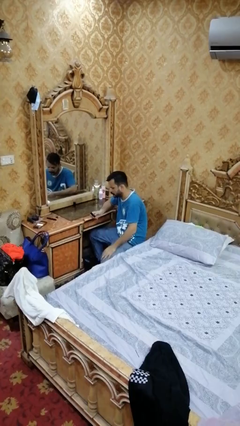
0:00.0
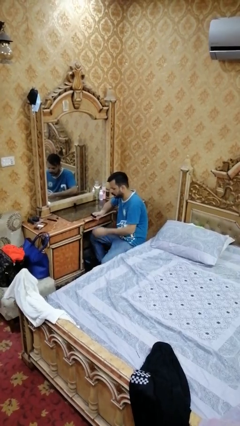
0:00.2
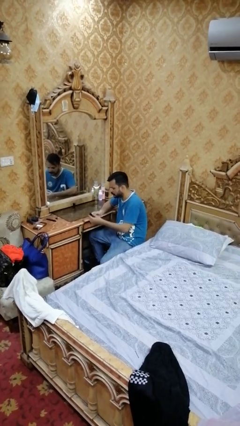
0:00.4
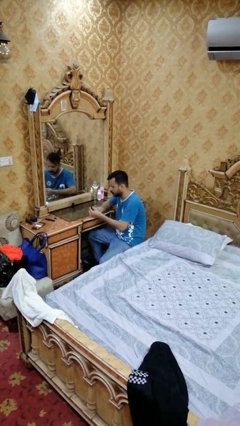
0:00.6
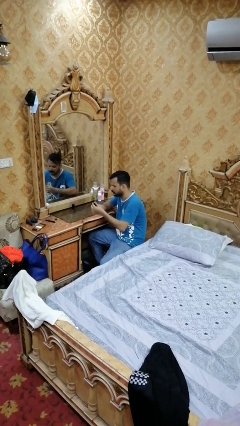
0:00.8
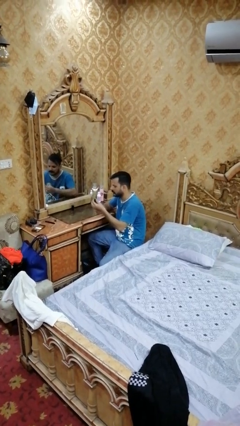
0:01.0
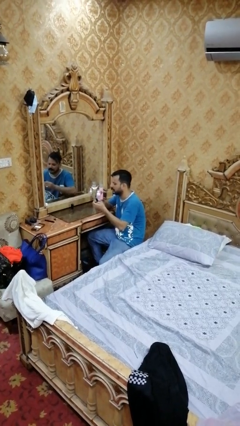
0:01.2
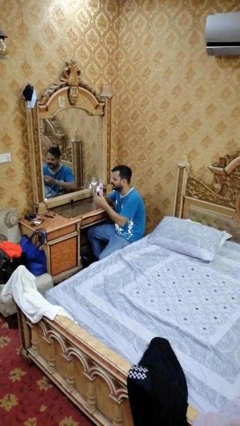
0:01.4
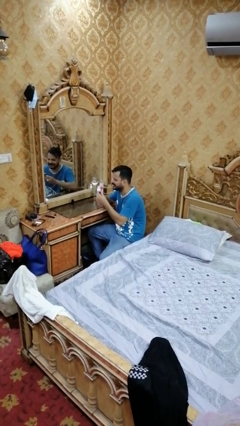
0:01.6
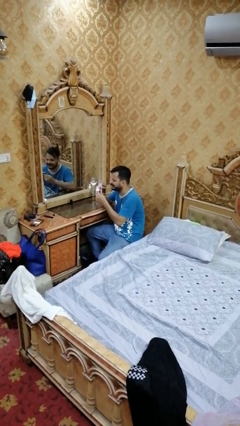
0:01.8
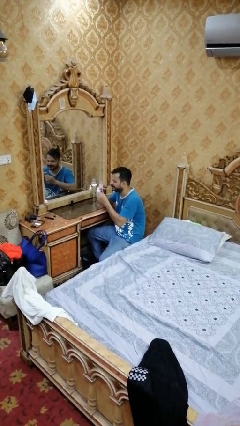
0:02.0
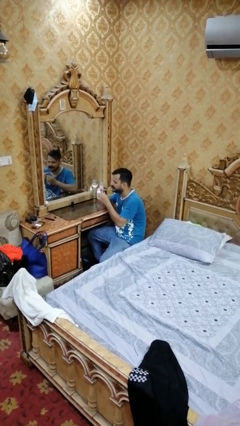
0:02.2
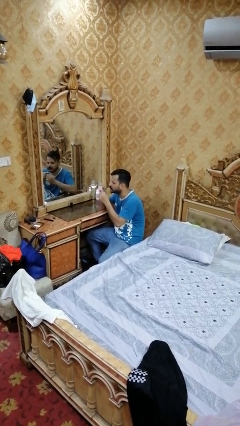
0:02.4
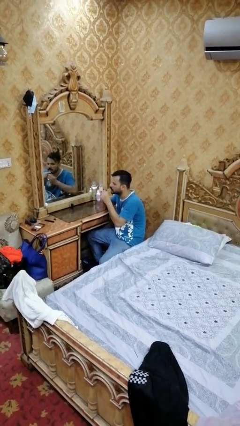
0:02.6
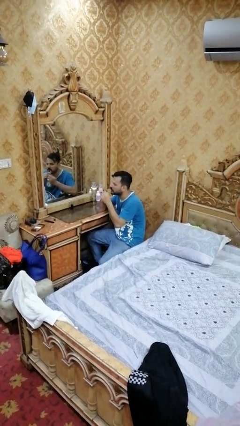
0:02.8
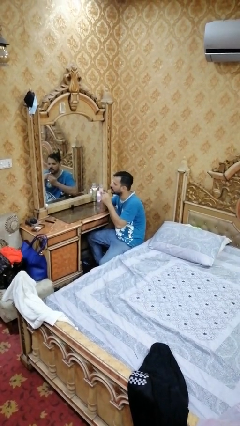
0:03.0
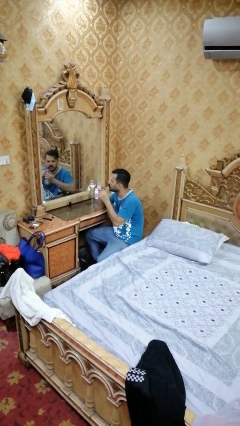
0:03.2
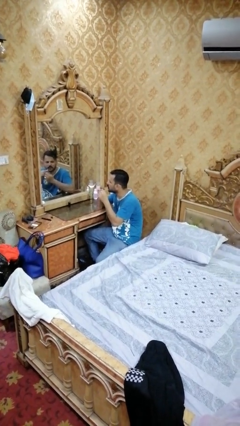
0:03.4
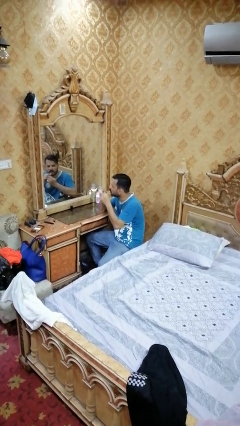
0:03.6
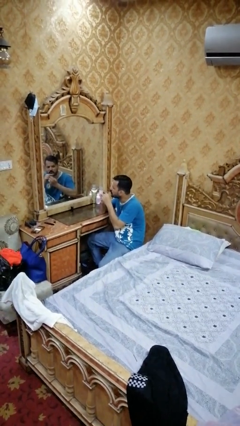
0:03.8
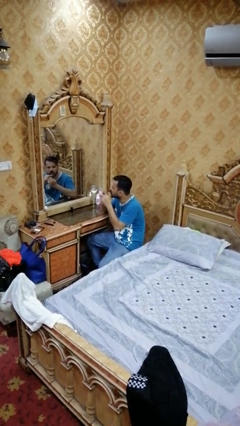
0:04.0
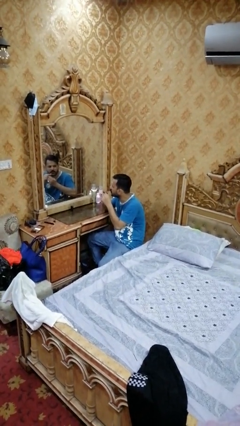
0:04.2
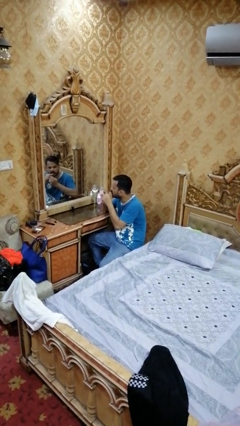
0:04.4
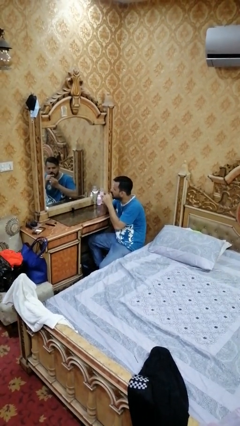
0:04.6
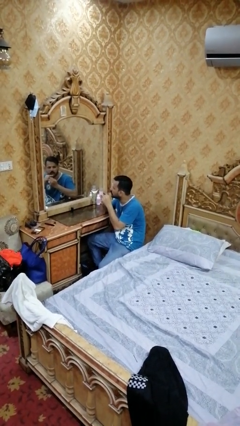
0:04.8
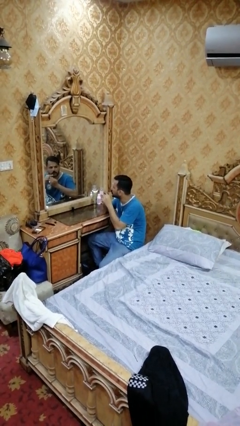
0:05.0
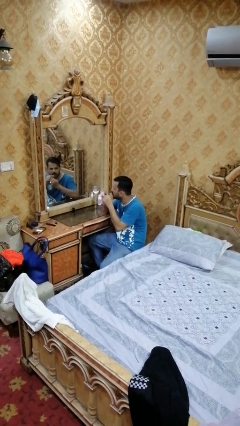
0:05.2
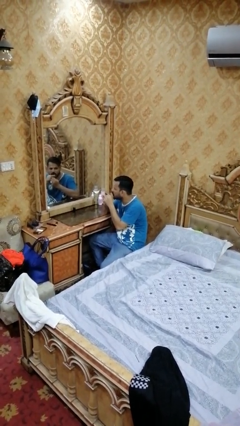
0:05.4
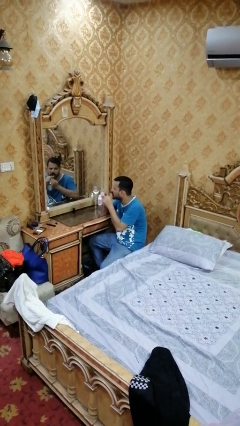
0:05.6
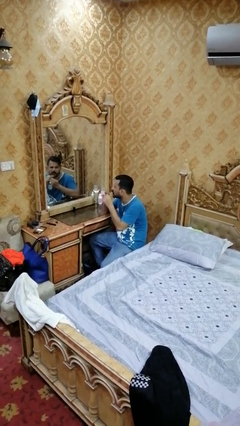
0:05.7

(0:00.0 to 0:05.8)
person applies lip makeup

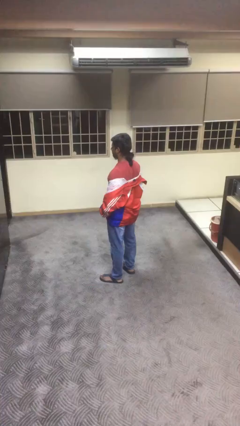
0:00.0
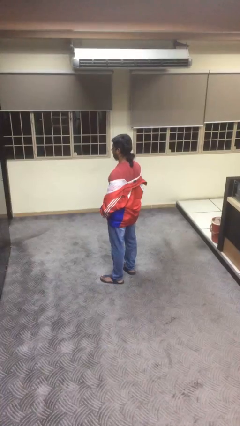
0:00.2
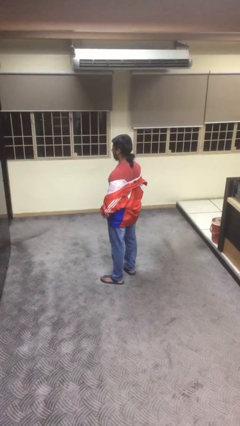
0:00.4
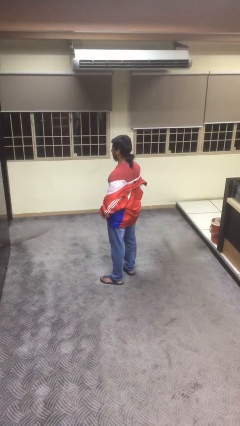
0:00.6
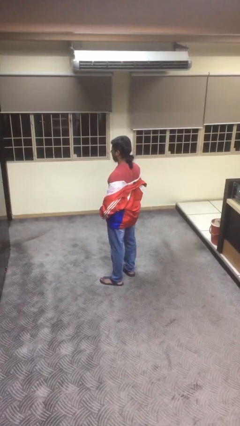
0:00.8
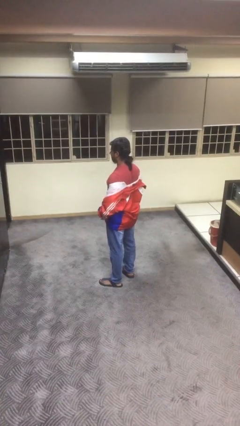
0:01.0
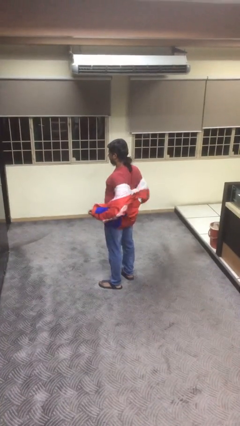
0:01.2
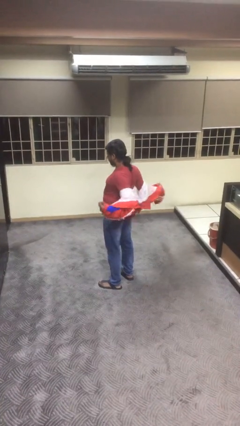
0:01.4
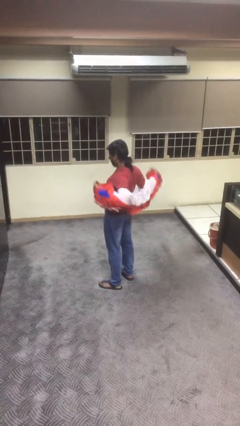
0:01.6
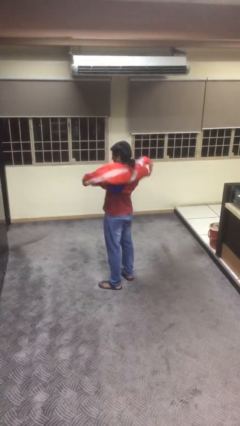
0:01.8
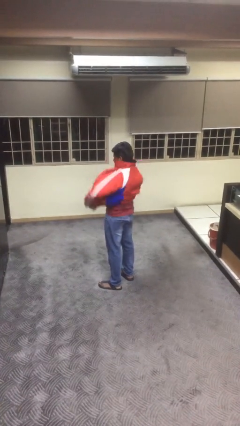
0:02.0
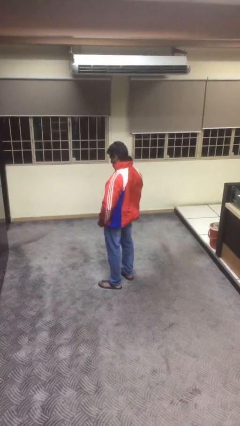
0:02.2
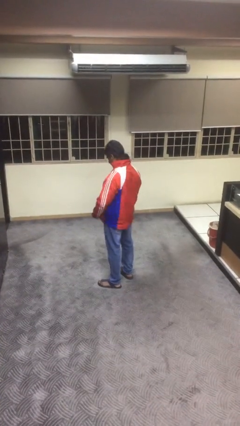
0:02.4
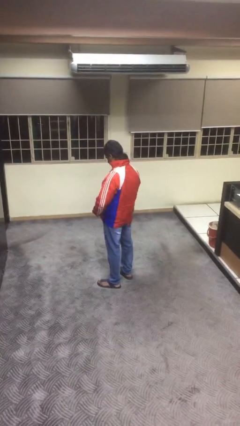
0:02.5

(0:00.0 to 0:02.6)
person puts on jacket

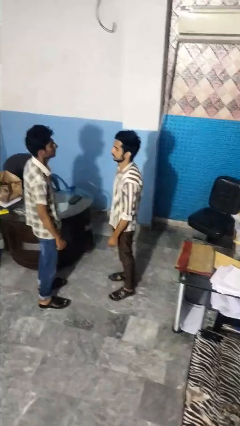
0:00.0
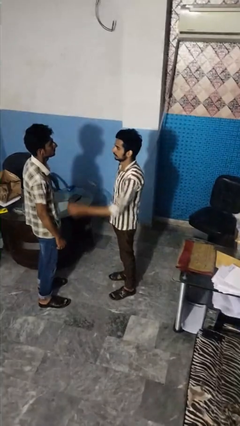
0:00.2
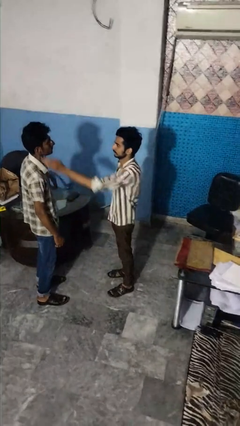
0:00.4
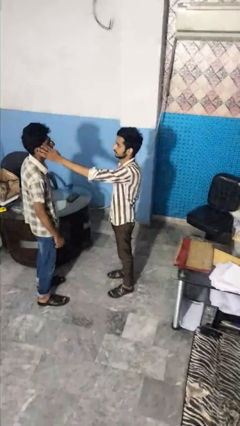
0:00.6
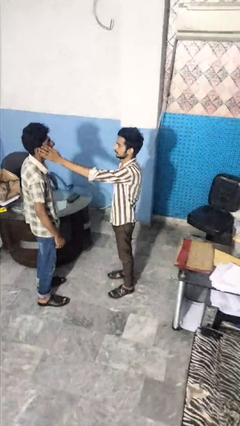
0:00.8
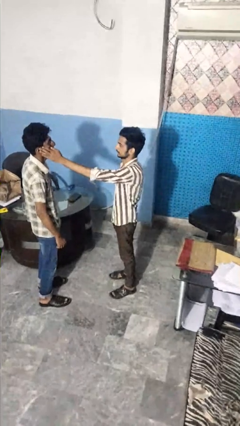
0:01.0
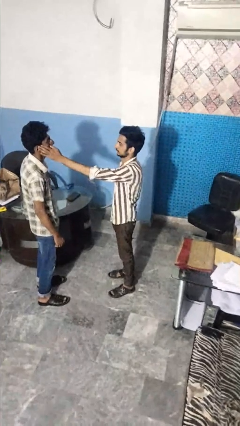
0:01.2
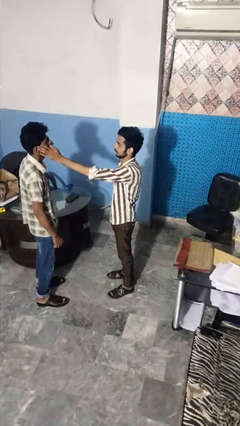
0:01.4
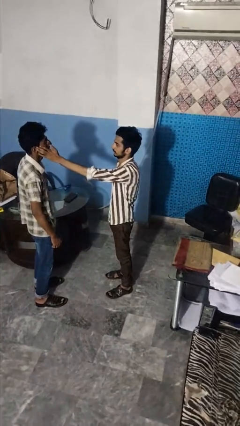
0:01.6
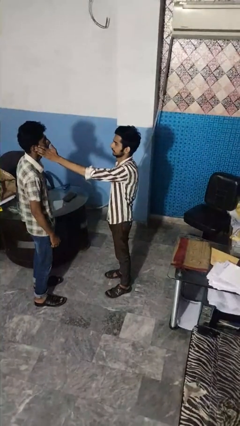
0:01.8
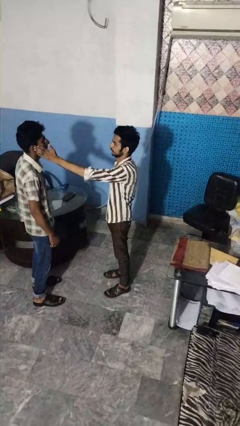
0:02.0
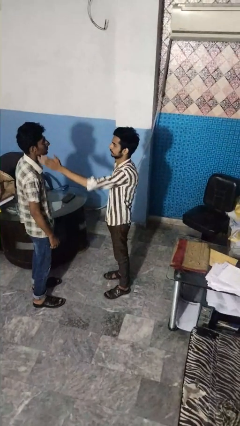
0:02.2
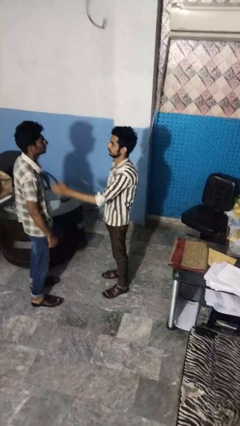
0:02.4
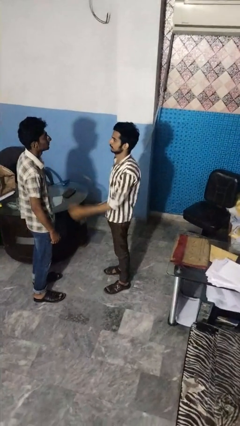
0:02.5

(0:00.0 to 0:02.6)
person touches face of person

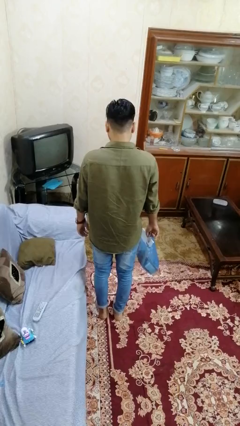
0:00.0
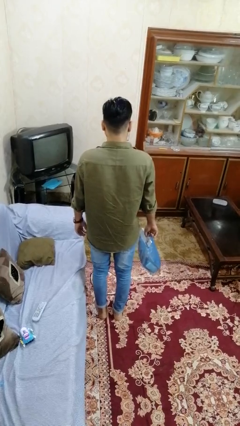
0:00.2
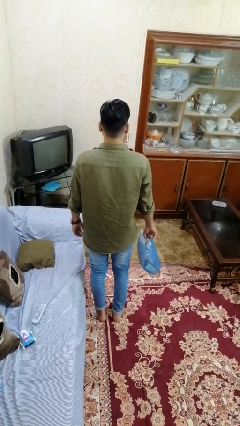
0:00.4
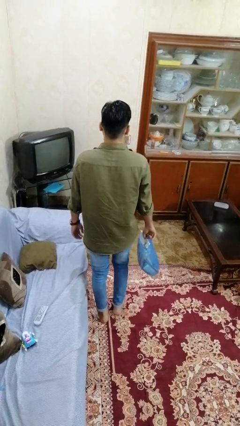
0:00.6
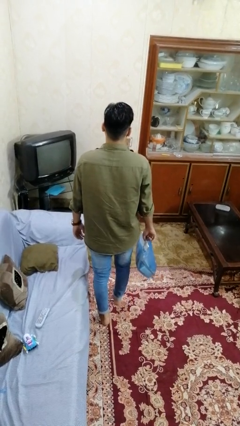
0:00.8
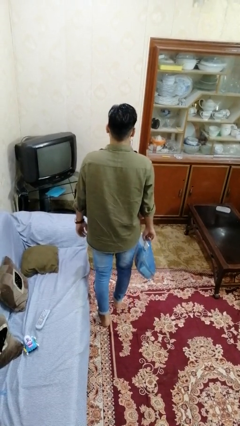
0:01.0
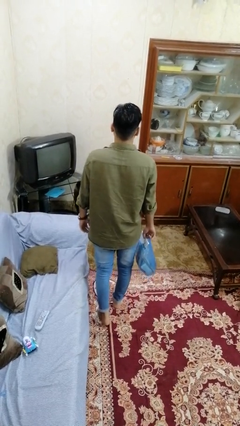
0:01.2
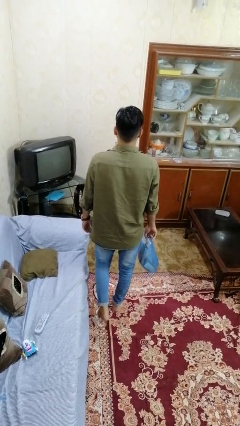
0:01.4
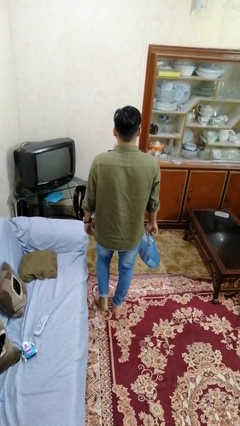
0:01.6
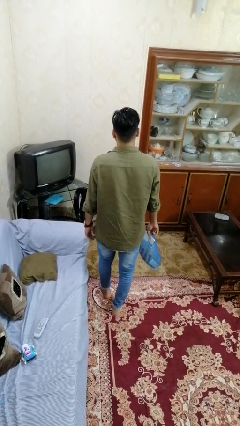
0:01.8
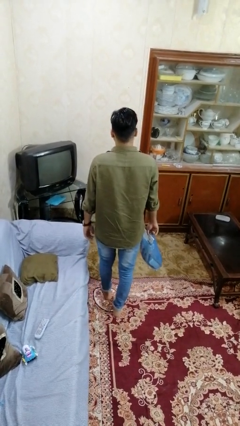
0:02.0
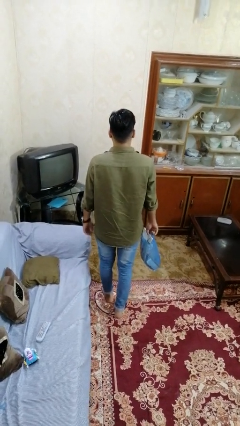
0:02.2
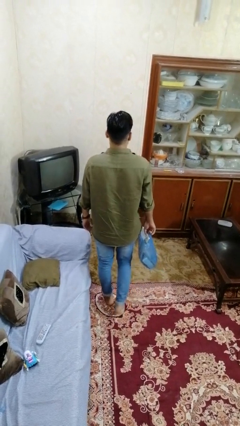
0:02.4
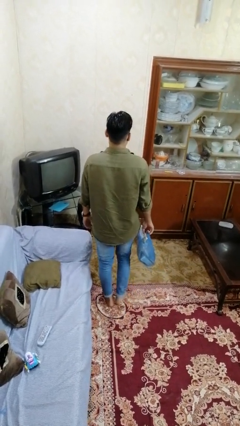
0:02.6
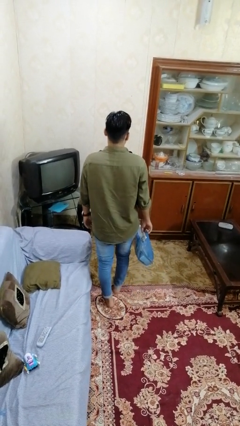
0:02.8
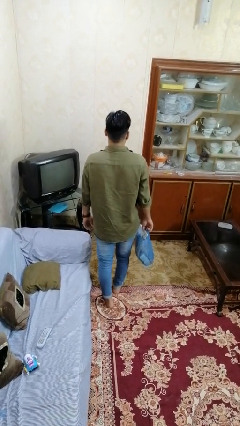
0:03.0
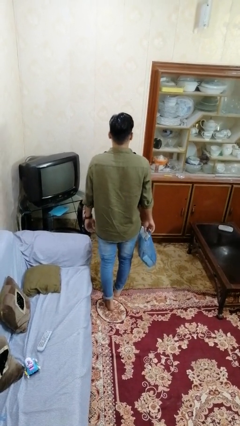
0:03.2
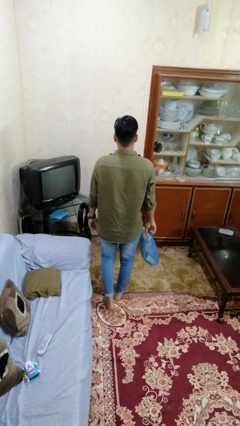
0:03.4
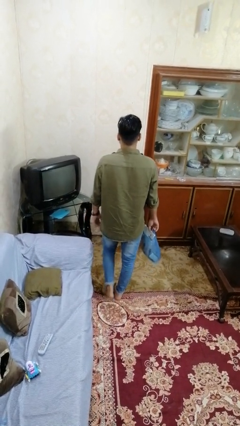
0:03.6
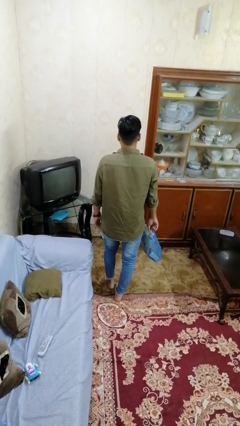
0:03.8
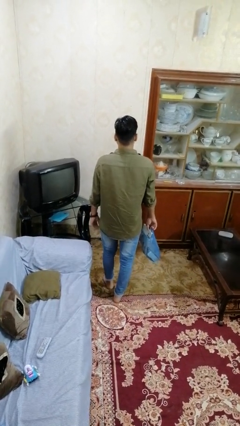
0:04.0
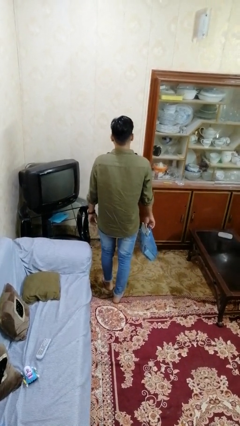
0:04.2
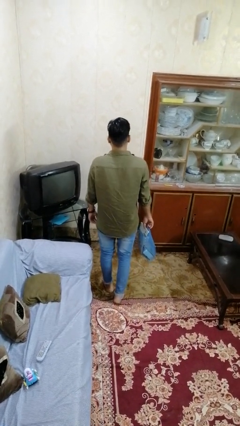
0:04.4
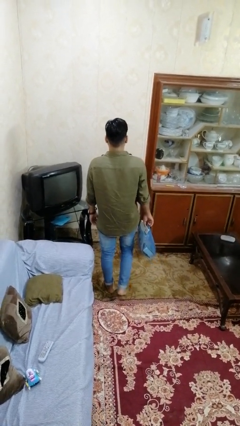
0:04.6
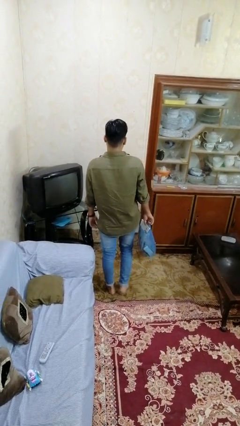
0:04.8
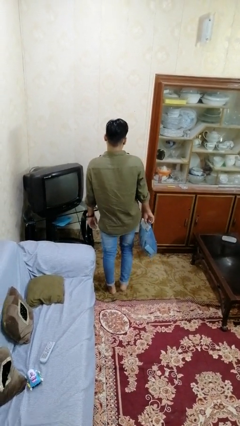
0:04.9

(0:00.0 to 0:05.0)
person carries groceries

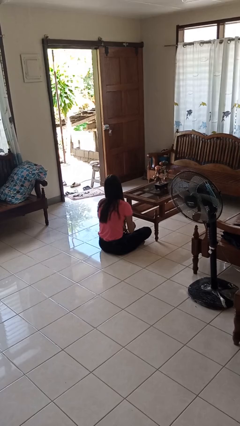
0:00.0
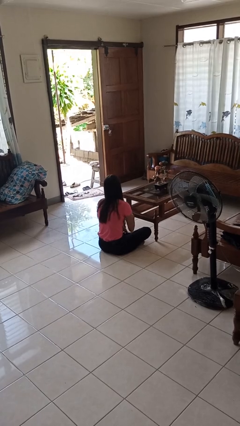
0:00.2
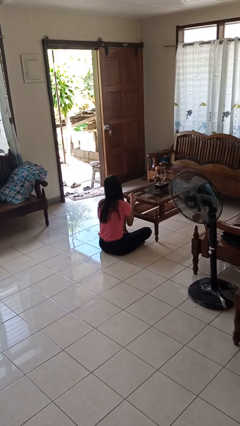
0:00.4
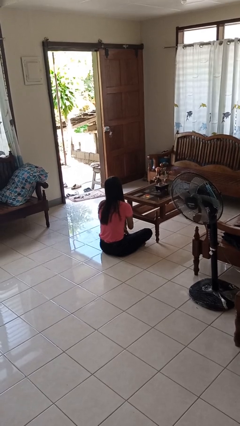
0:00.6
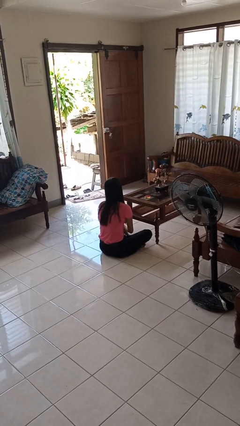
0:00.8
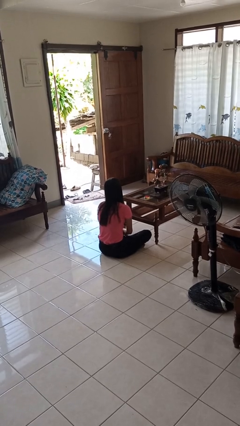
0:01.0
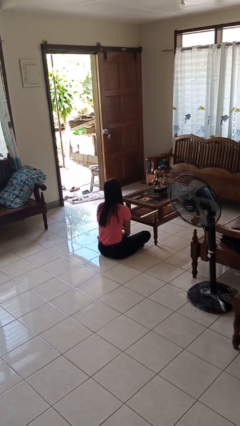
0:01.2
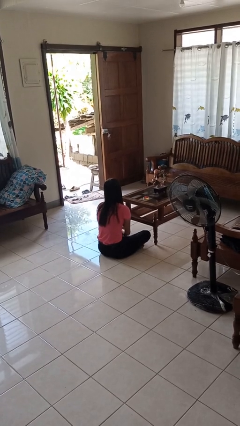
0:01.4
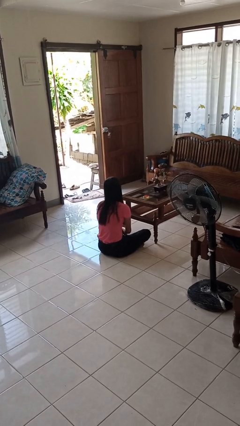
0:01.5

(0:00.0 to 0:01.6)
person throws object on table

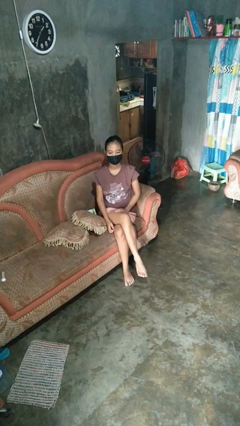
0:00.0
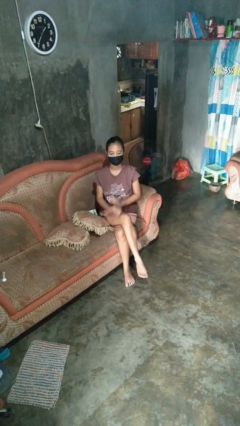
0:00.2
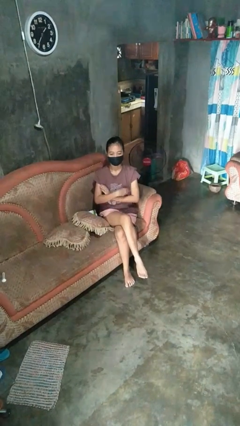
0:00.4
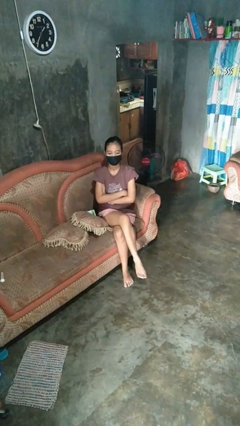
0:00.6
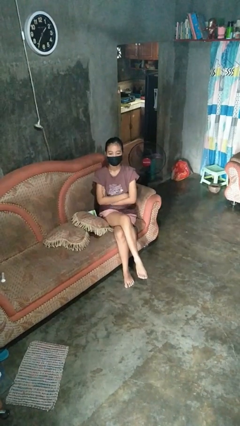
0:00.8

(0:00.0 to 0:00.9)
person crosses arms
